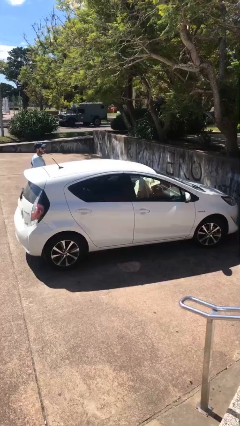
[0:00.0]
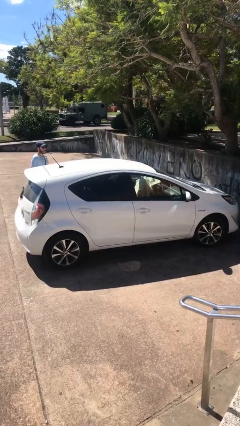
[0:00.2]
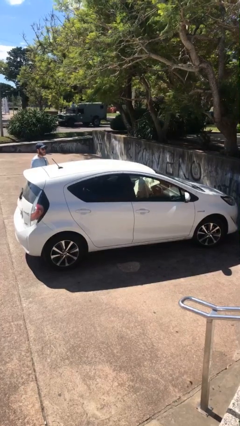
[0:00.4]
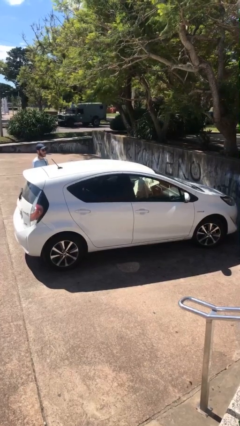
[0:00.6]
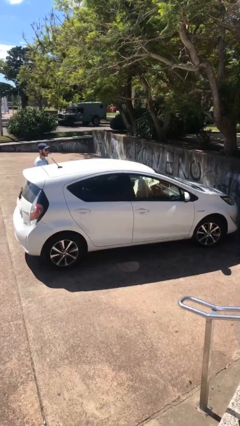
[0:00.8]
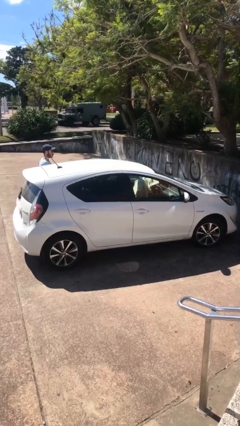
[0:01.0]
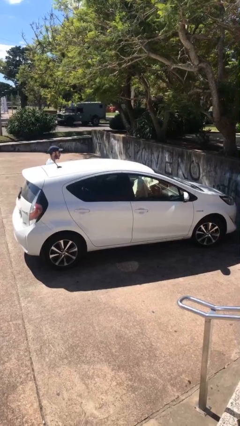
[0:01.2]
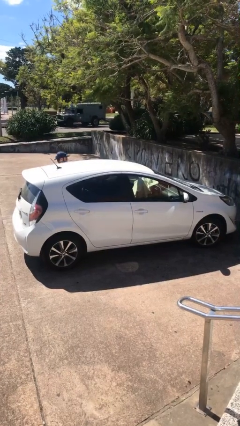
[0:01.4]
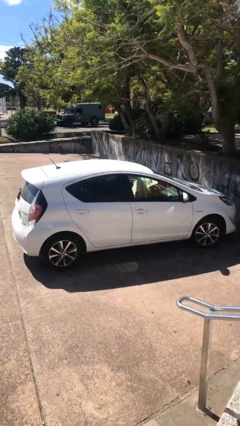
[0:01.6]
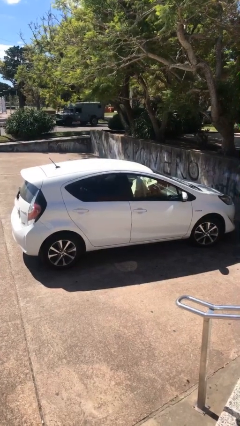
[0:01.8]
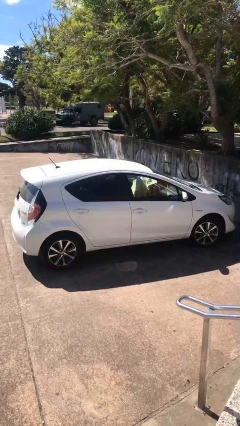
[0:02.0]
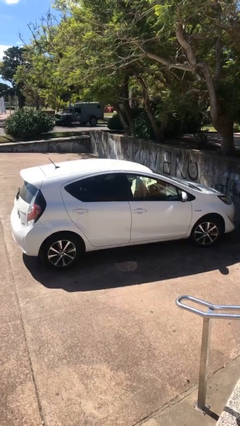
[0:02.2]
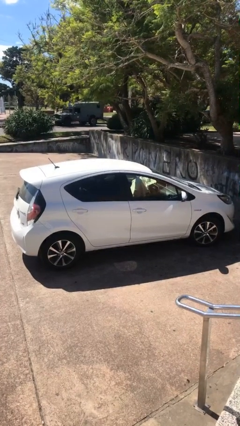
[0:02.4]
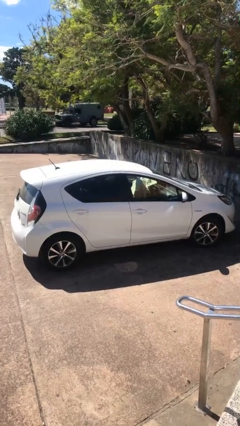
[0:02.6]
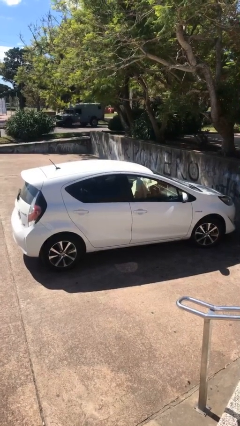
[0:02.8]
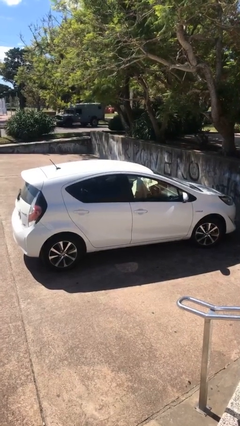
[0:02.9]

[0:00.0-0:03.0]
car picks up person

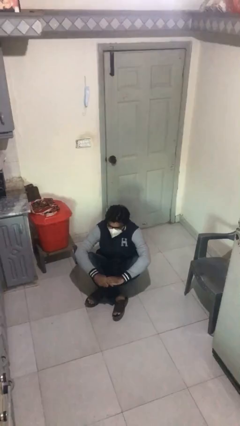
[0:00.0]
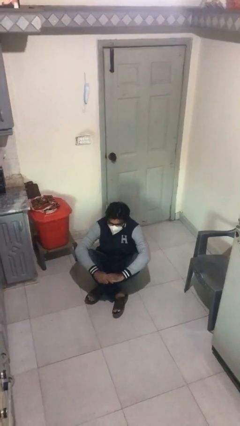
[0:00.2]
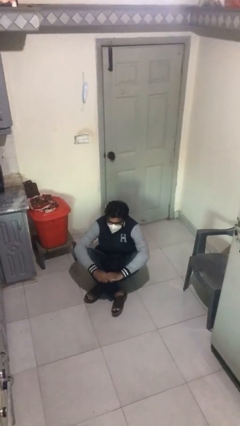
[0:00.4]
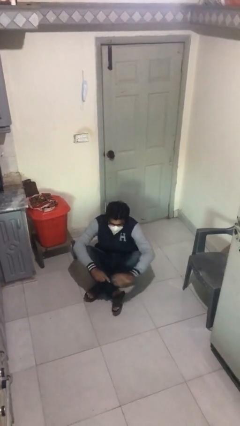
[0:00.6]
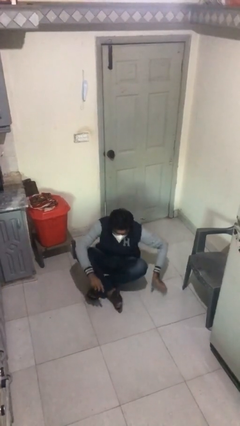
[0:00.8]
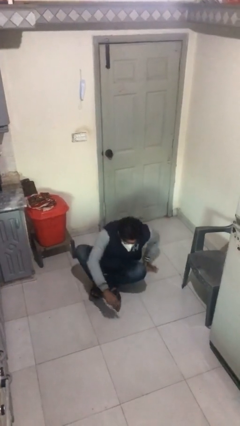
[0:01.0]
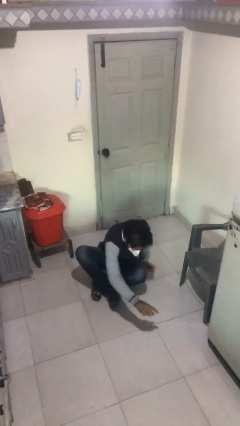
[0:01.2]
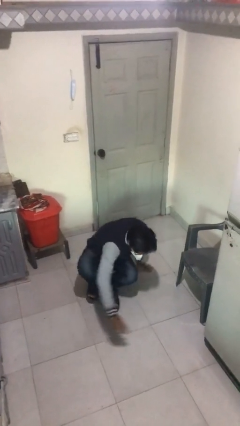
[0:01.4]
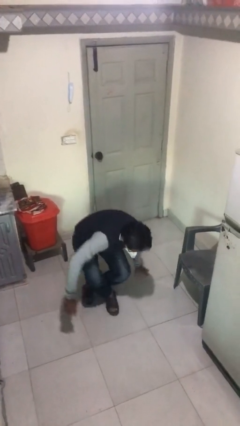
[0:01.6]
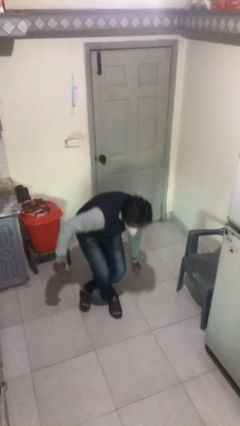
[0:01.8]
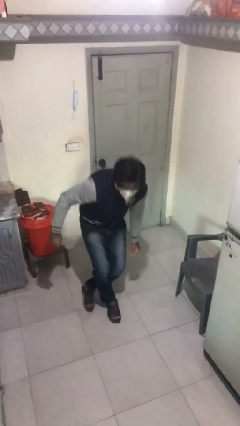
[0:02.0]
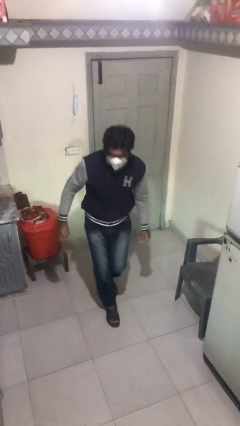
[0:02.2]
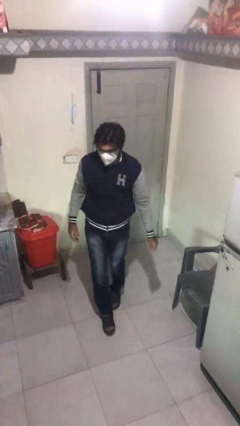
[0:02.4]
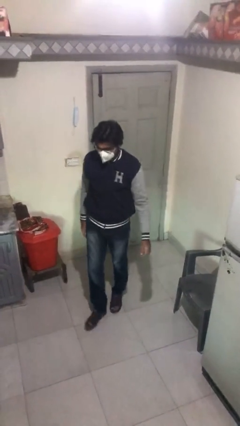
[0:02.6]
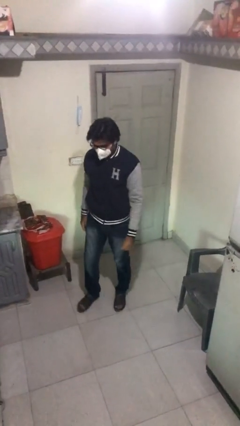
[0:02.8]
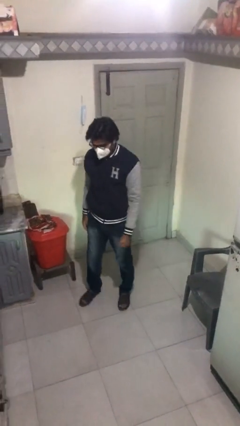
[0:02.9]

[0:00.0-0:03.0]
person stands up

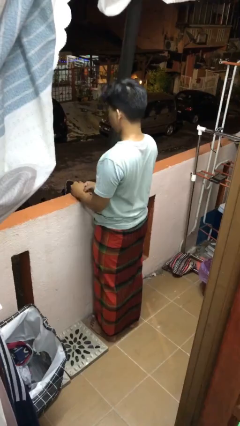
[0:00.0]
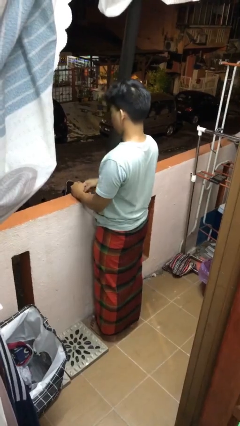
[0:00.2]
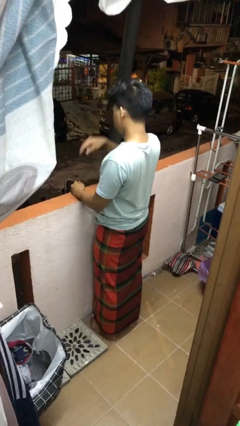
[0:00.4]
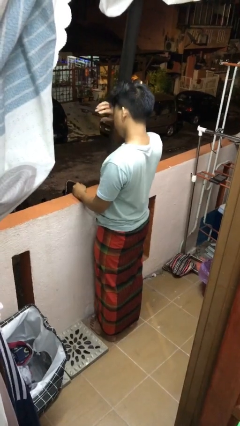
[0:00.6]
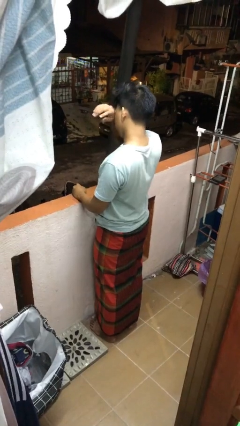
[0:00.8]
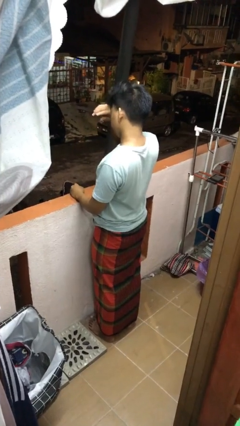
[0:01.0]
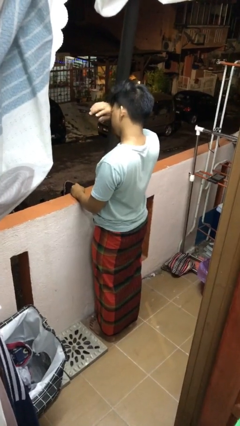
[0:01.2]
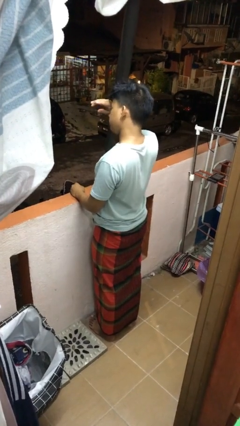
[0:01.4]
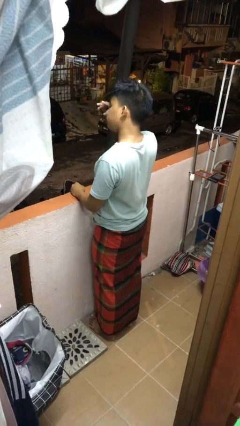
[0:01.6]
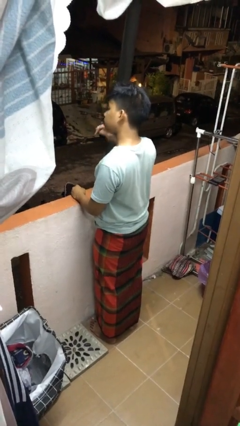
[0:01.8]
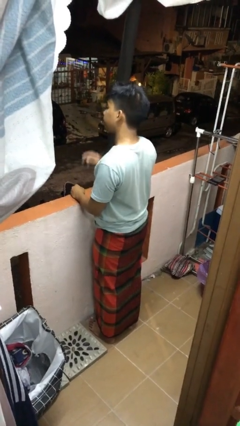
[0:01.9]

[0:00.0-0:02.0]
person rubs eyes

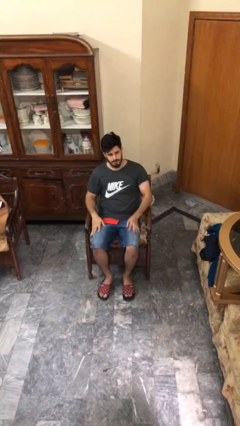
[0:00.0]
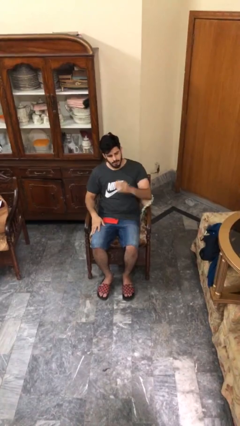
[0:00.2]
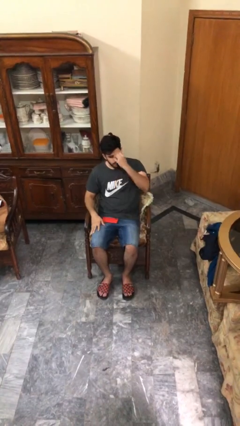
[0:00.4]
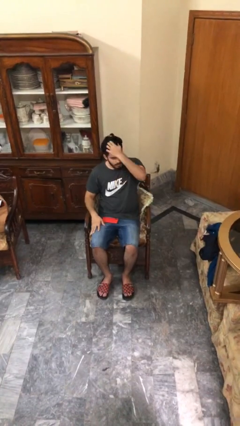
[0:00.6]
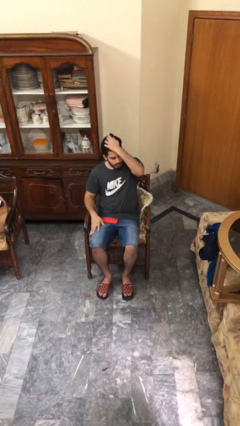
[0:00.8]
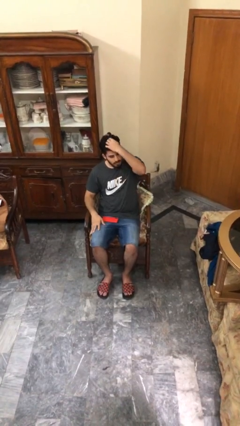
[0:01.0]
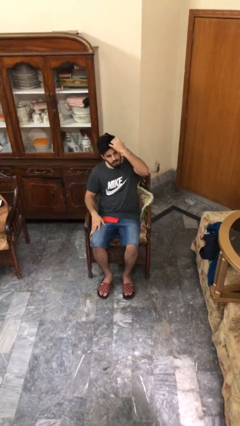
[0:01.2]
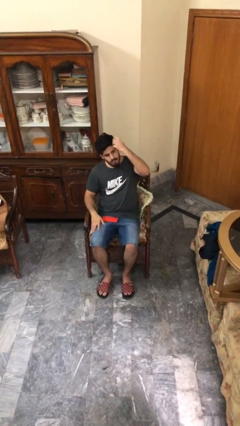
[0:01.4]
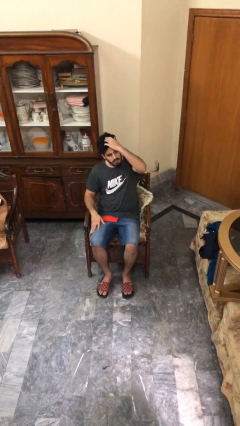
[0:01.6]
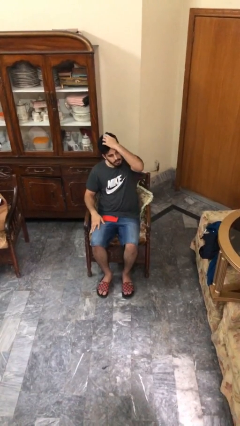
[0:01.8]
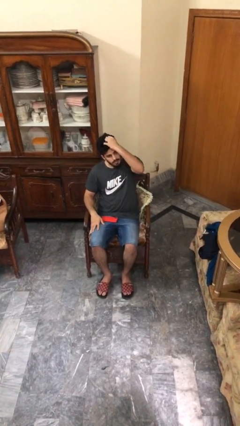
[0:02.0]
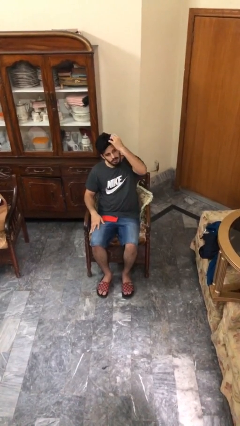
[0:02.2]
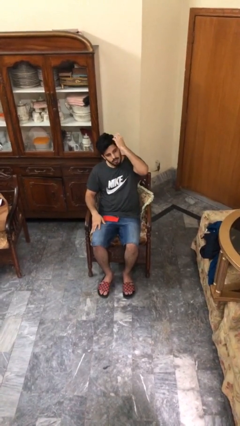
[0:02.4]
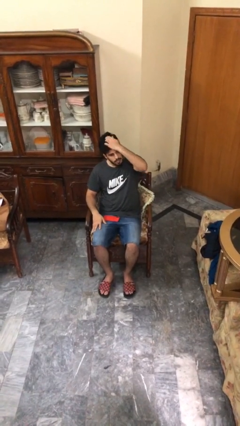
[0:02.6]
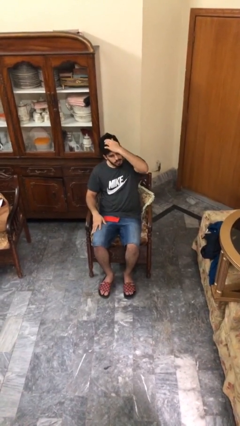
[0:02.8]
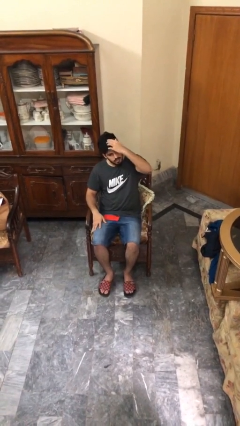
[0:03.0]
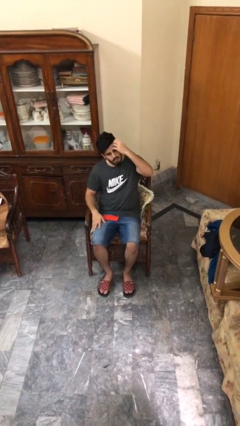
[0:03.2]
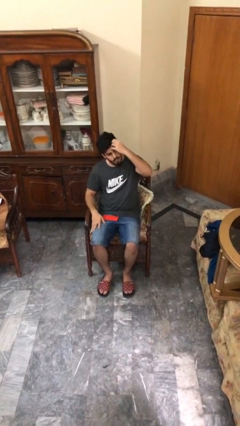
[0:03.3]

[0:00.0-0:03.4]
person strokes hair

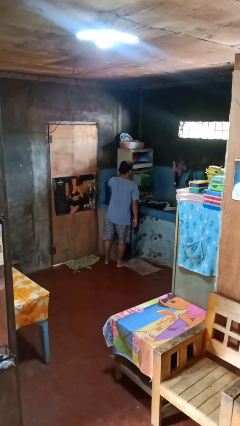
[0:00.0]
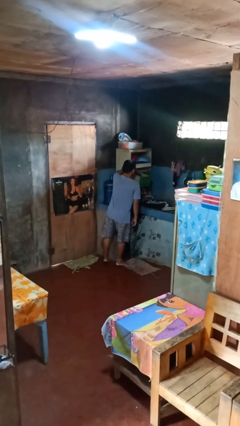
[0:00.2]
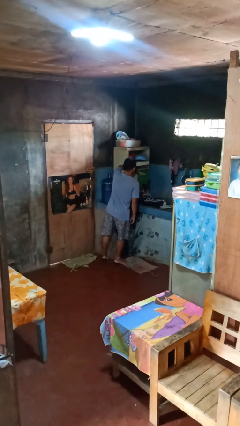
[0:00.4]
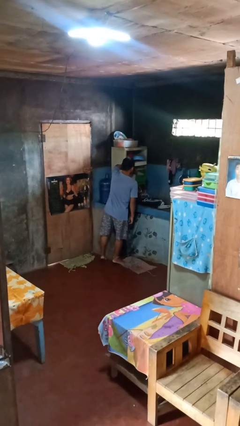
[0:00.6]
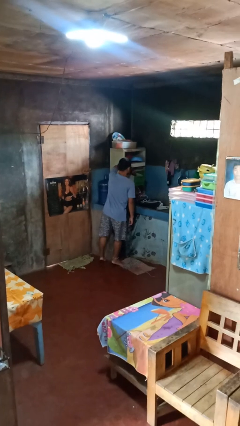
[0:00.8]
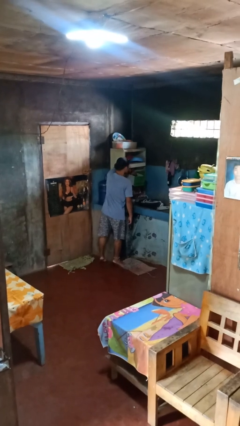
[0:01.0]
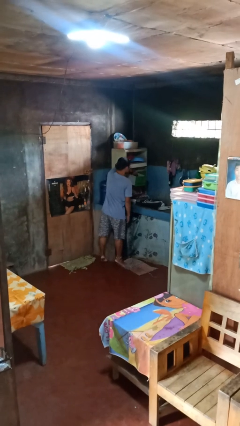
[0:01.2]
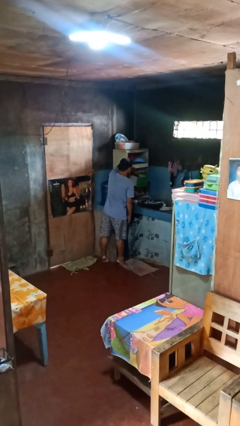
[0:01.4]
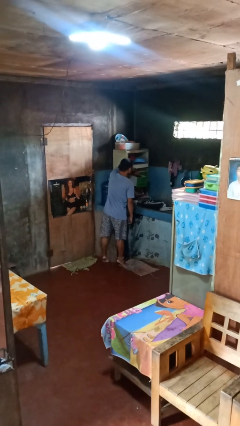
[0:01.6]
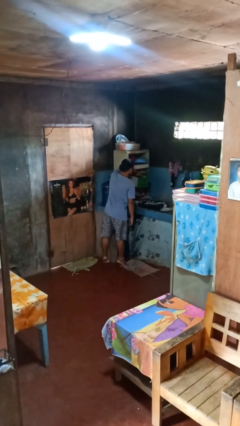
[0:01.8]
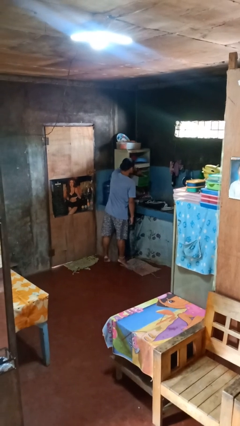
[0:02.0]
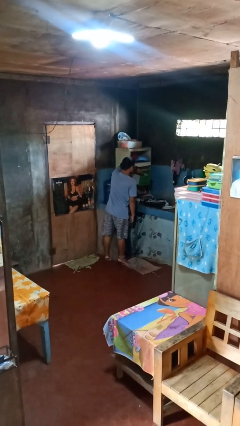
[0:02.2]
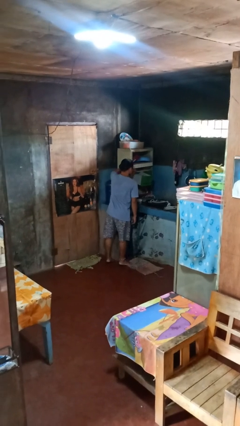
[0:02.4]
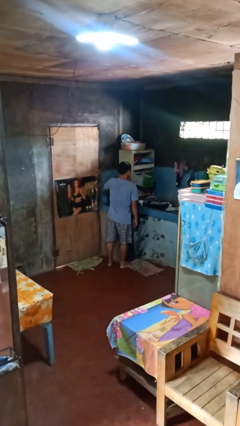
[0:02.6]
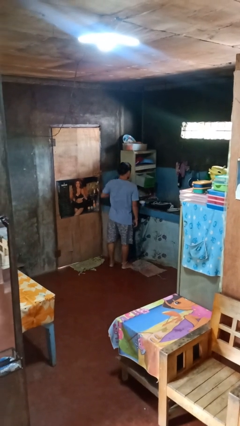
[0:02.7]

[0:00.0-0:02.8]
person searches in kitchen drawer

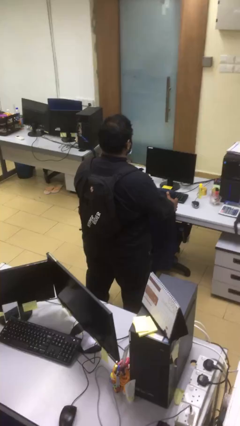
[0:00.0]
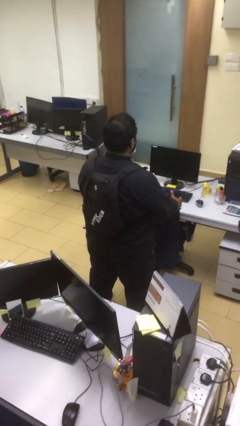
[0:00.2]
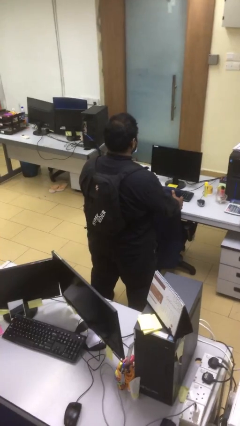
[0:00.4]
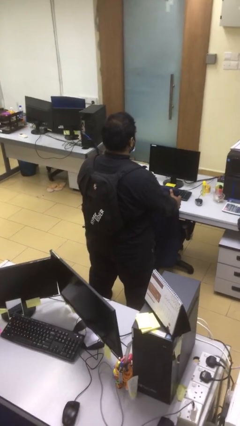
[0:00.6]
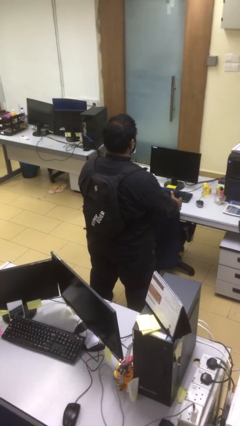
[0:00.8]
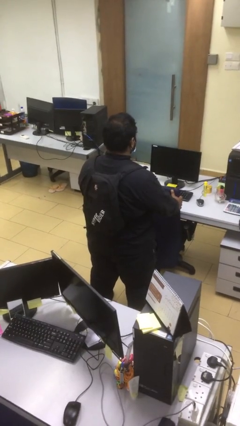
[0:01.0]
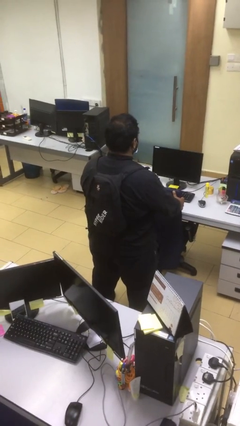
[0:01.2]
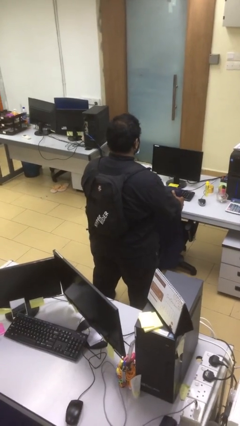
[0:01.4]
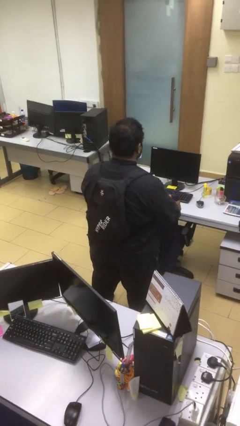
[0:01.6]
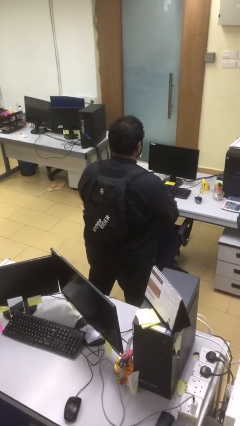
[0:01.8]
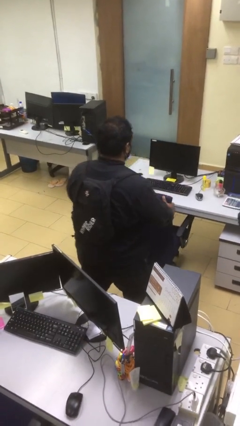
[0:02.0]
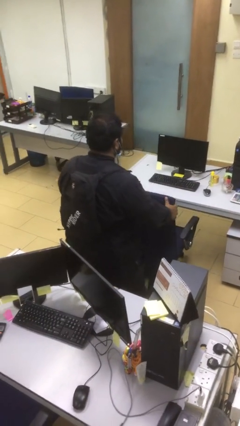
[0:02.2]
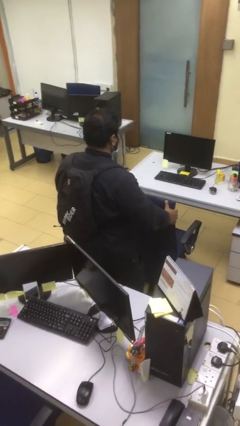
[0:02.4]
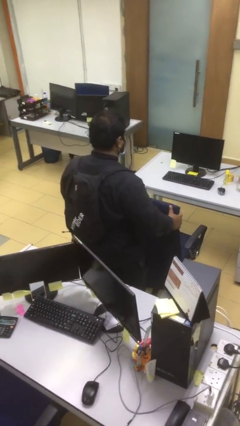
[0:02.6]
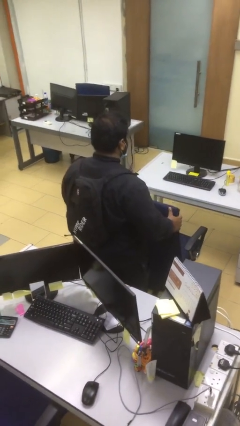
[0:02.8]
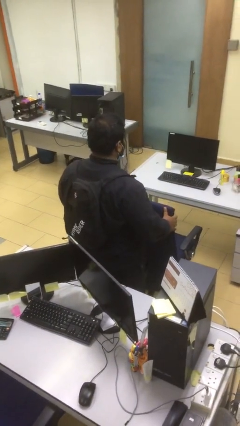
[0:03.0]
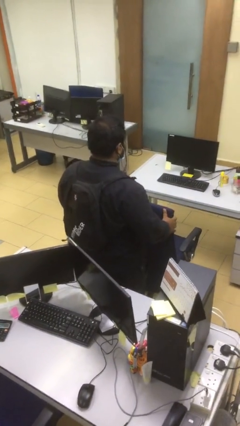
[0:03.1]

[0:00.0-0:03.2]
person pulls out chair
